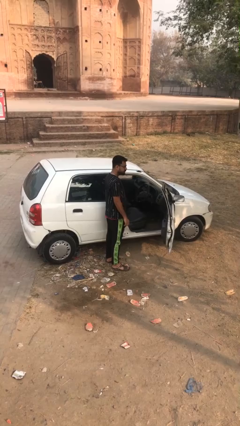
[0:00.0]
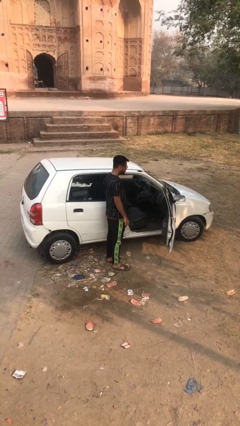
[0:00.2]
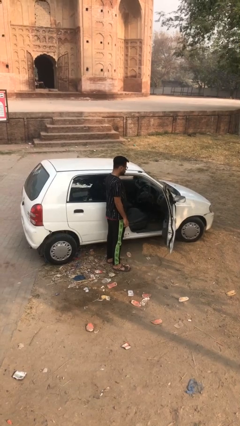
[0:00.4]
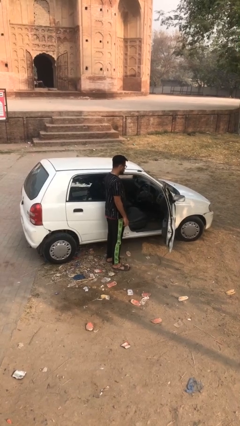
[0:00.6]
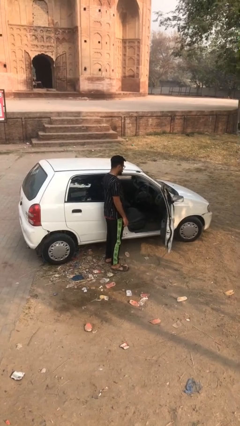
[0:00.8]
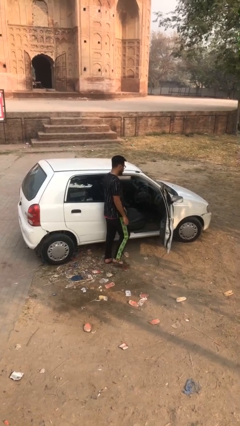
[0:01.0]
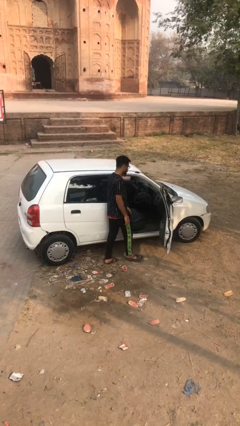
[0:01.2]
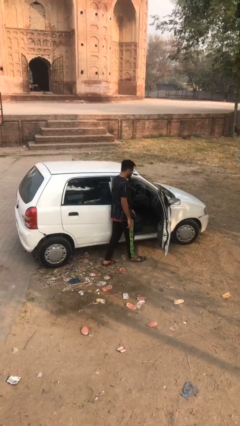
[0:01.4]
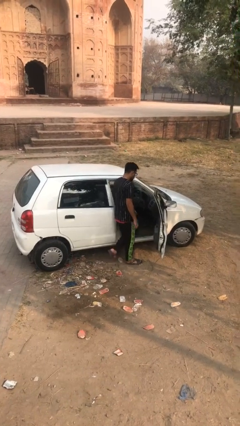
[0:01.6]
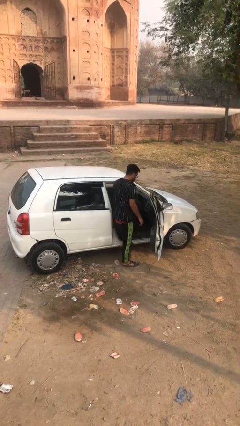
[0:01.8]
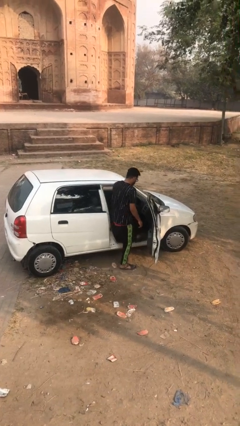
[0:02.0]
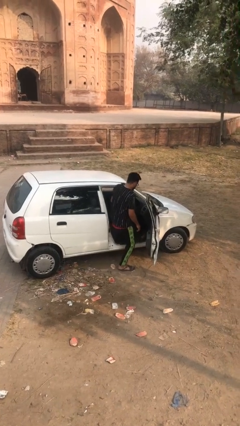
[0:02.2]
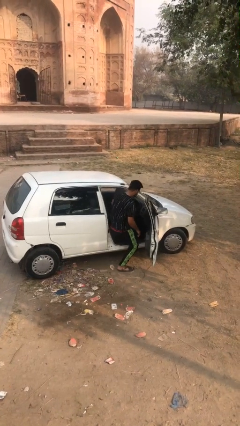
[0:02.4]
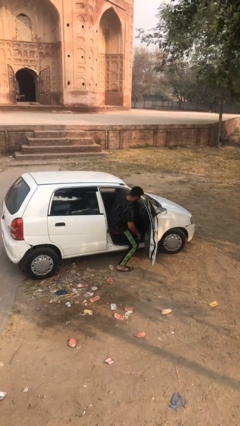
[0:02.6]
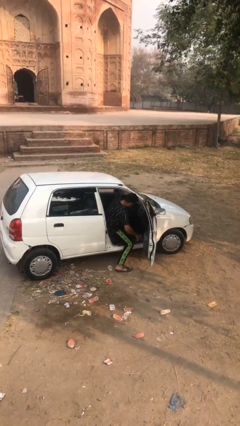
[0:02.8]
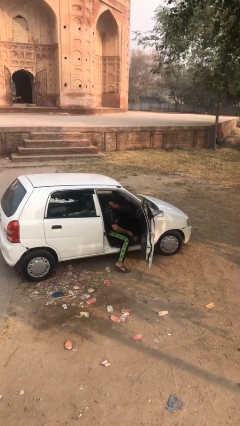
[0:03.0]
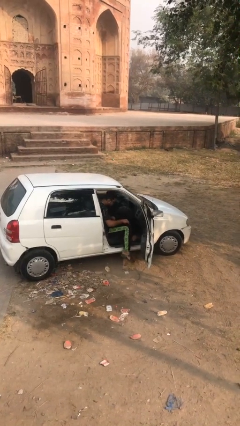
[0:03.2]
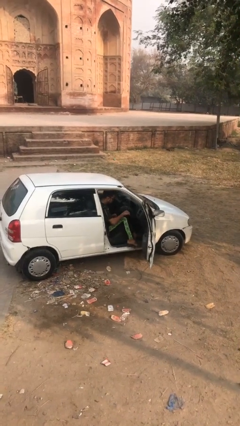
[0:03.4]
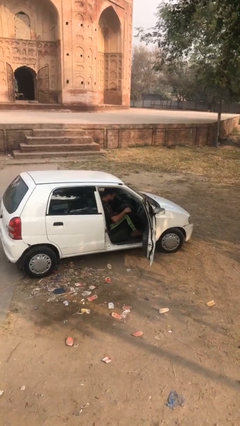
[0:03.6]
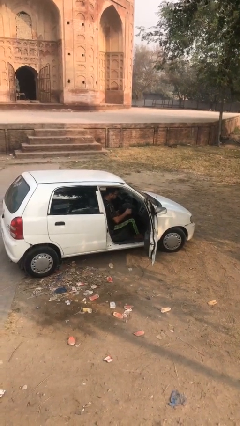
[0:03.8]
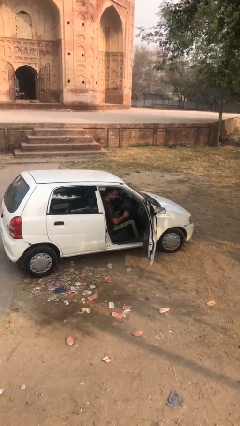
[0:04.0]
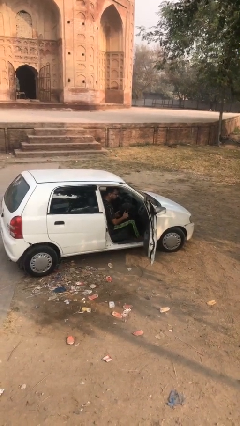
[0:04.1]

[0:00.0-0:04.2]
person enters car

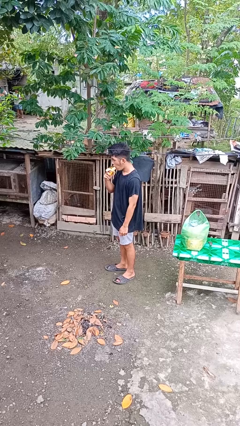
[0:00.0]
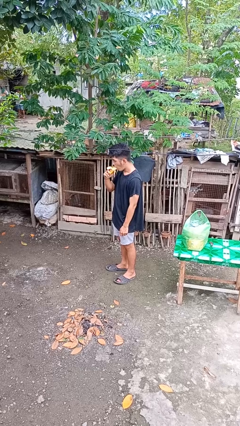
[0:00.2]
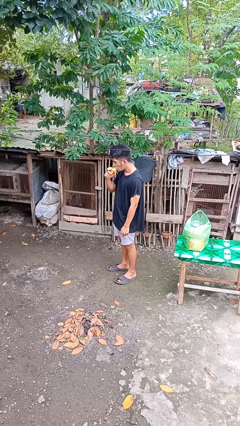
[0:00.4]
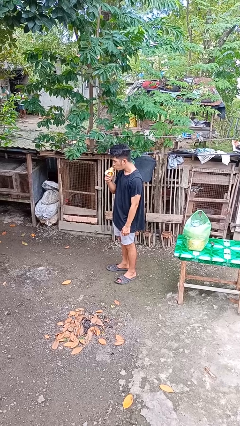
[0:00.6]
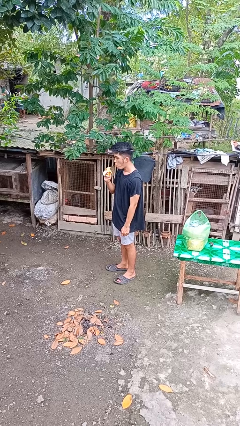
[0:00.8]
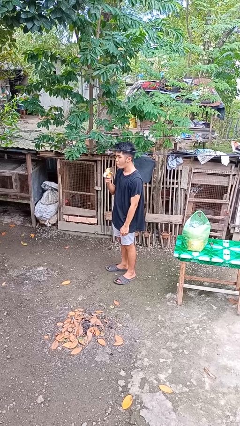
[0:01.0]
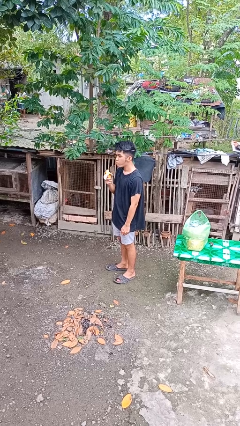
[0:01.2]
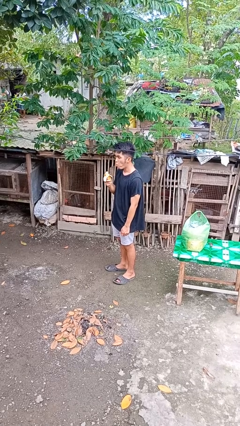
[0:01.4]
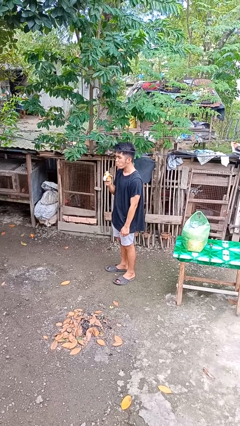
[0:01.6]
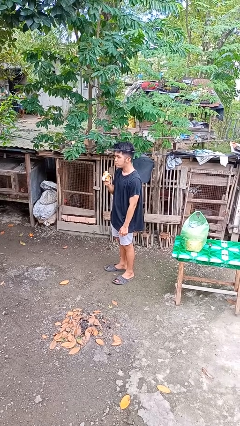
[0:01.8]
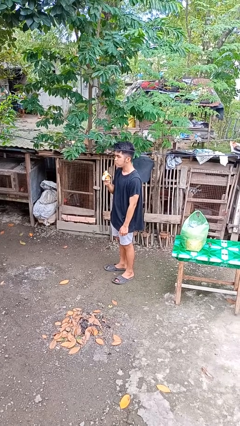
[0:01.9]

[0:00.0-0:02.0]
person eats banana

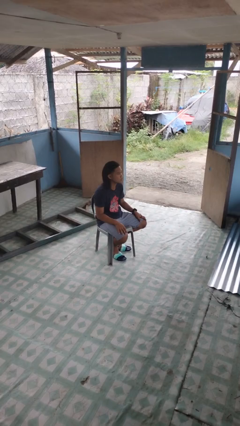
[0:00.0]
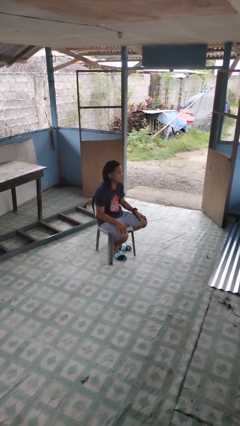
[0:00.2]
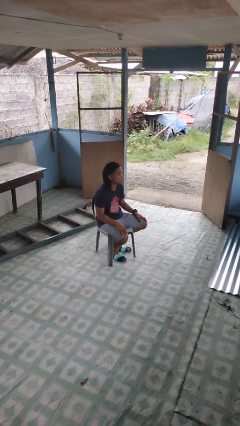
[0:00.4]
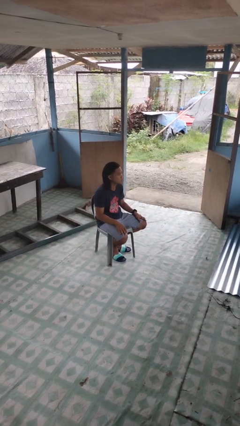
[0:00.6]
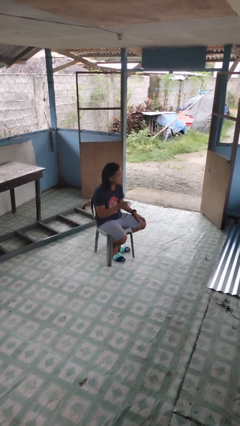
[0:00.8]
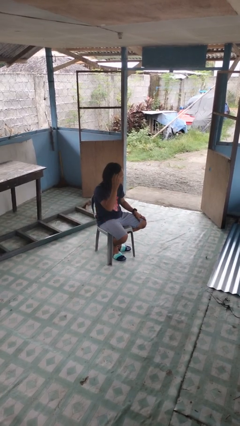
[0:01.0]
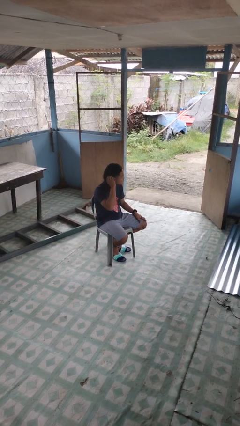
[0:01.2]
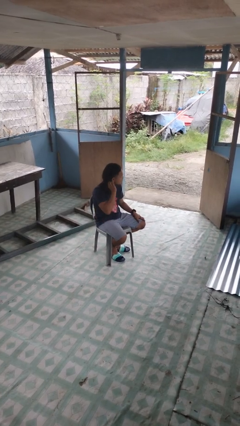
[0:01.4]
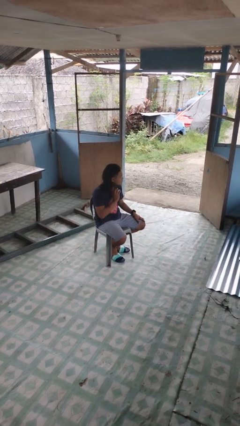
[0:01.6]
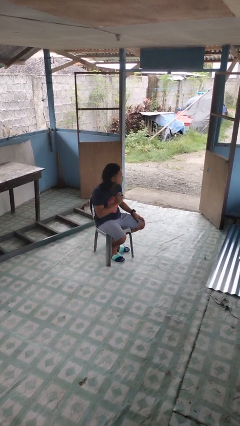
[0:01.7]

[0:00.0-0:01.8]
person strokes hair

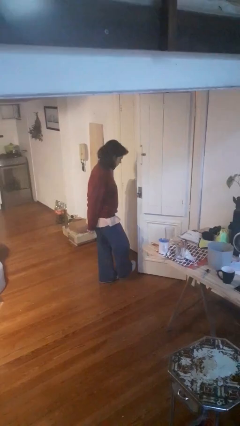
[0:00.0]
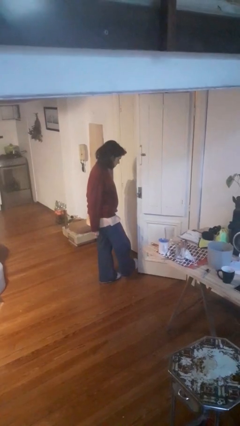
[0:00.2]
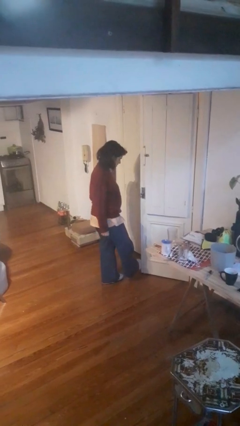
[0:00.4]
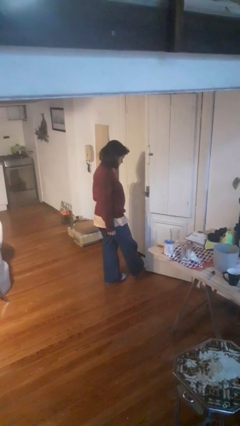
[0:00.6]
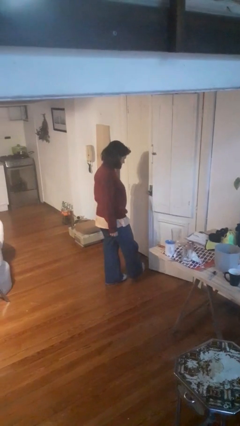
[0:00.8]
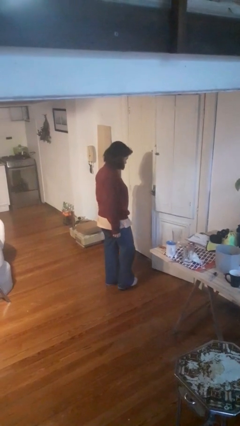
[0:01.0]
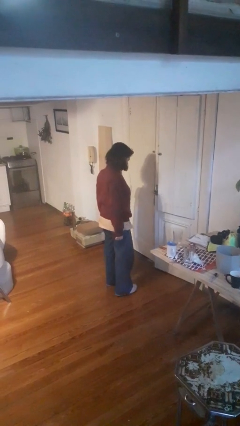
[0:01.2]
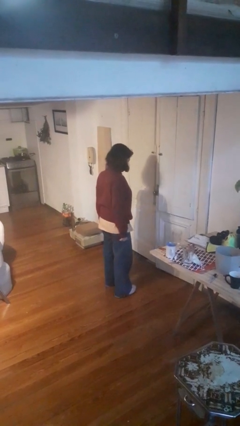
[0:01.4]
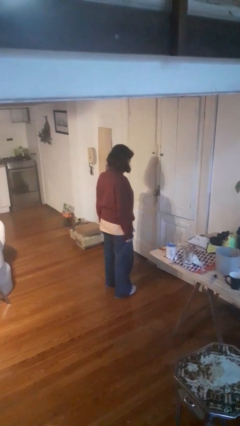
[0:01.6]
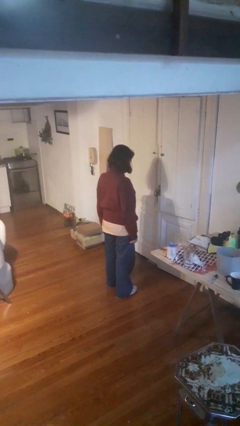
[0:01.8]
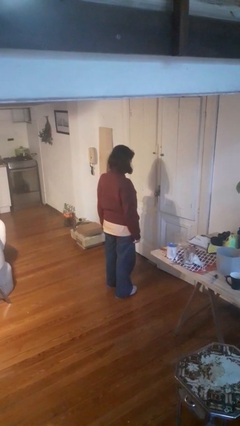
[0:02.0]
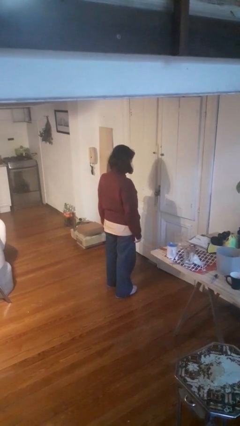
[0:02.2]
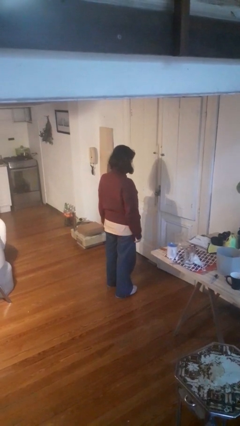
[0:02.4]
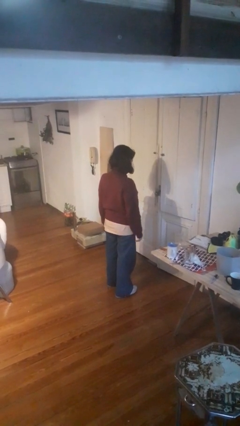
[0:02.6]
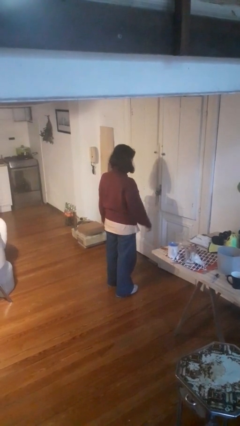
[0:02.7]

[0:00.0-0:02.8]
person closes door with foot

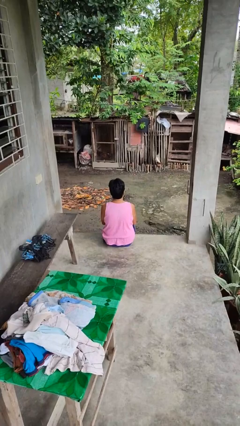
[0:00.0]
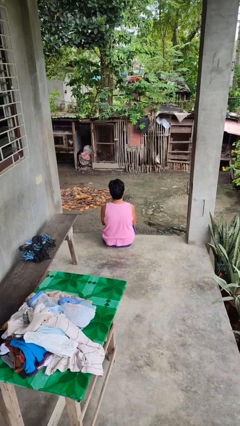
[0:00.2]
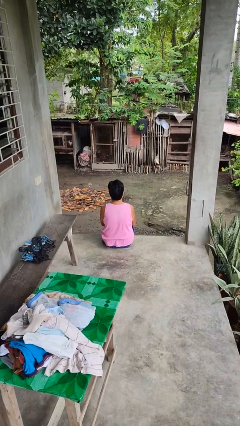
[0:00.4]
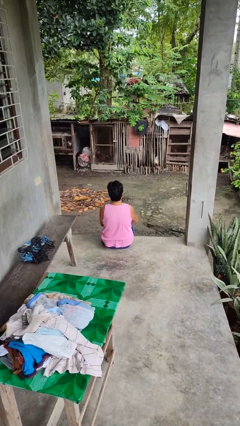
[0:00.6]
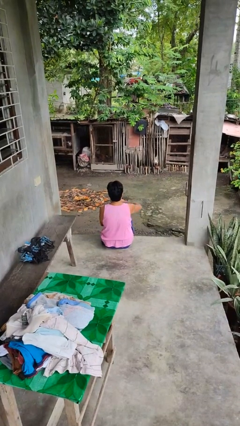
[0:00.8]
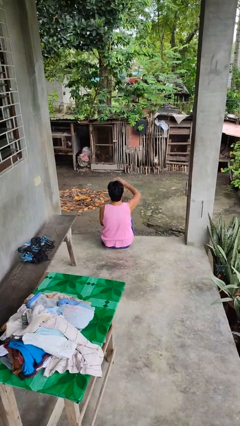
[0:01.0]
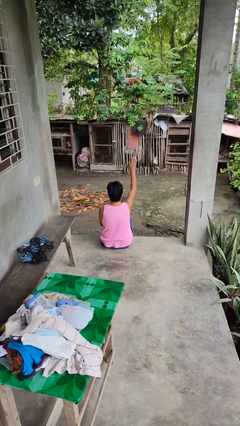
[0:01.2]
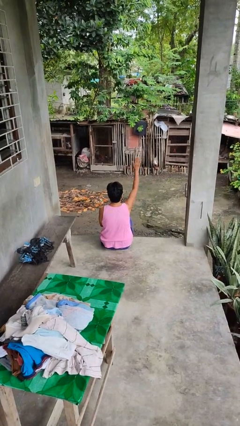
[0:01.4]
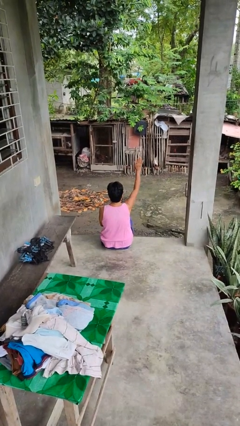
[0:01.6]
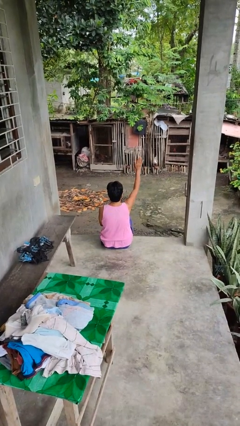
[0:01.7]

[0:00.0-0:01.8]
person gestures swipe up

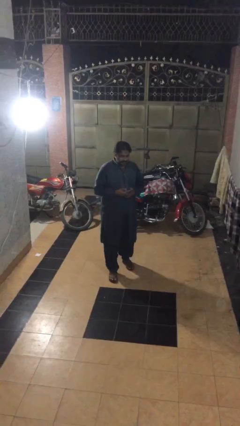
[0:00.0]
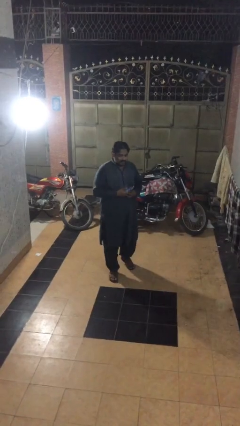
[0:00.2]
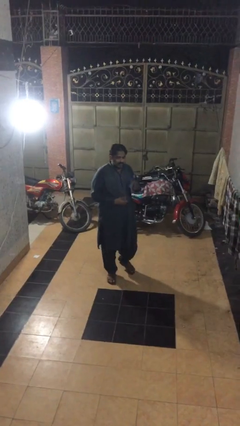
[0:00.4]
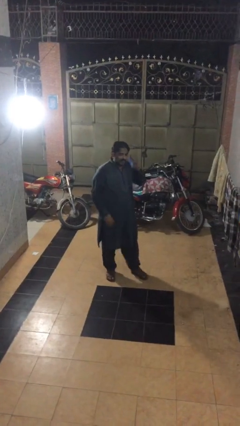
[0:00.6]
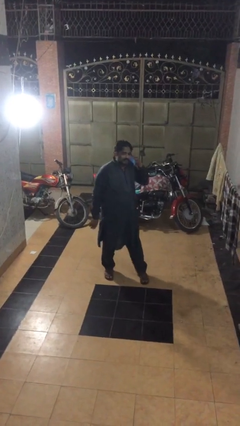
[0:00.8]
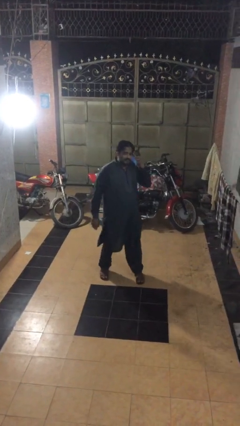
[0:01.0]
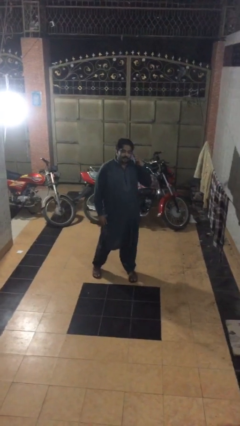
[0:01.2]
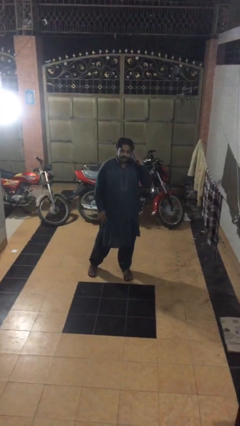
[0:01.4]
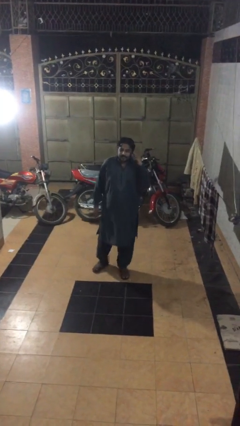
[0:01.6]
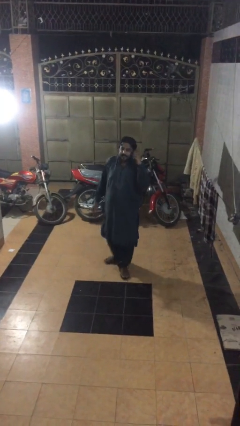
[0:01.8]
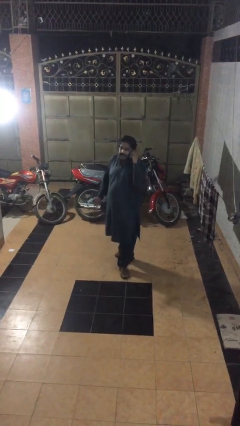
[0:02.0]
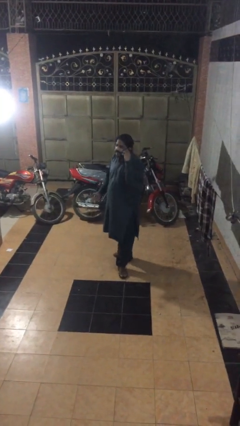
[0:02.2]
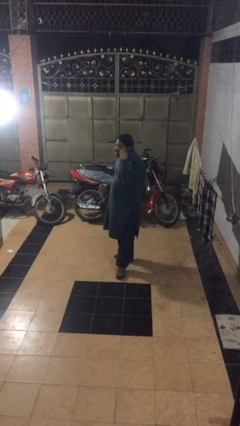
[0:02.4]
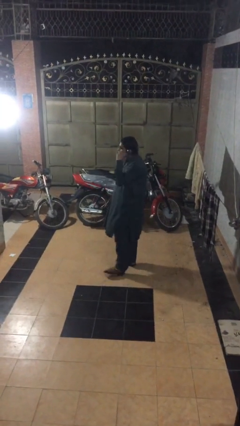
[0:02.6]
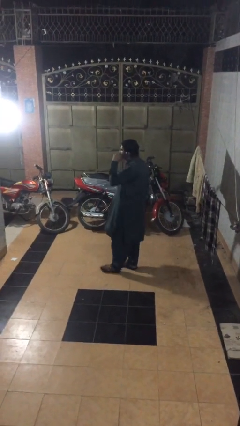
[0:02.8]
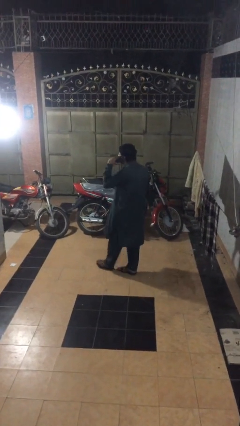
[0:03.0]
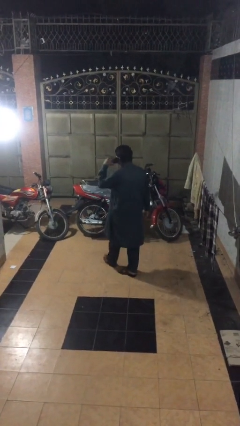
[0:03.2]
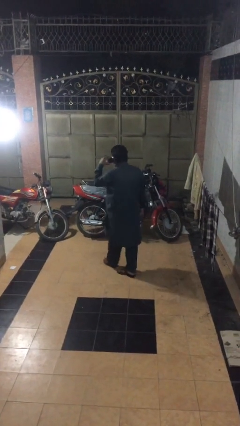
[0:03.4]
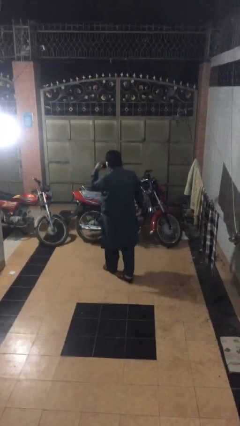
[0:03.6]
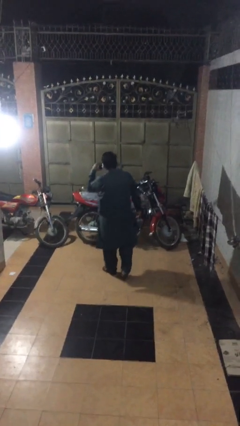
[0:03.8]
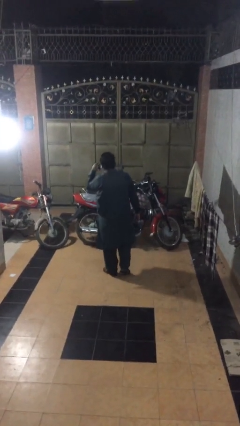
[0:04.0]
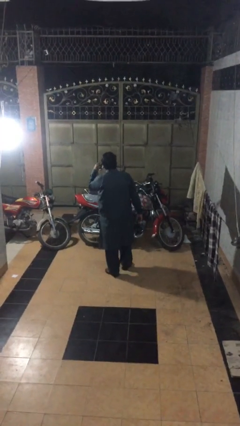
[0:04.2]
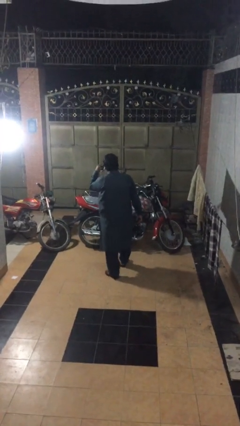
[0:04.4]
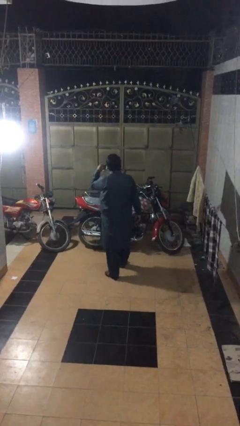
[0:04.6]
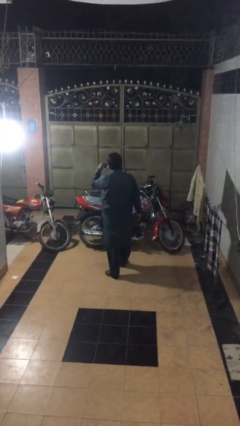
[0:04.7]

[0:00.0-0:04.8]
person talks on phone
